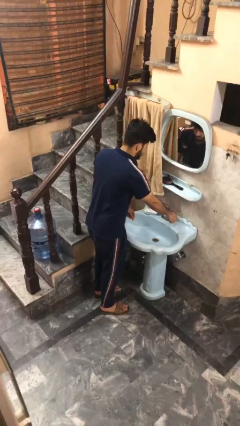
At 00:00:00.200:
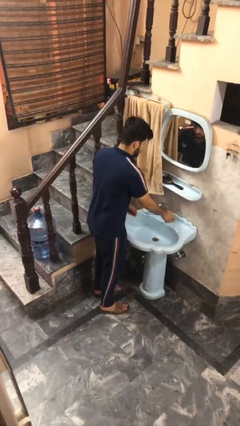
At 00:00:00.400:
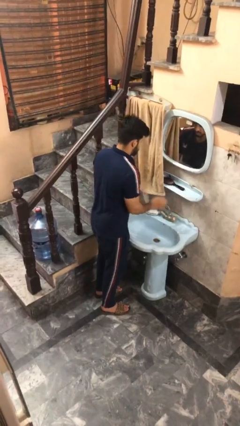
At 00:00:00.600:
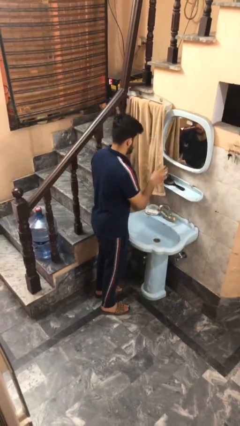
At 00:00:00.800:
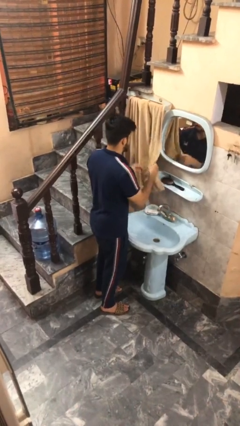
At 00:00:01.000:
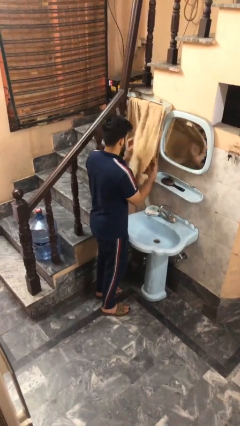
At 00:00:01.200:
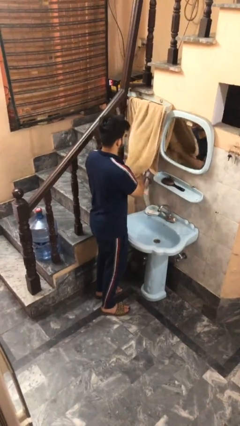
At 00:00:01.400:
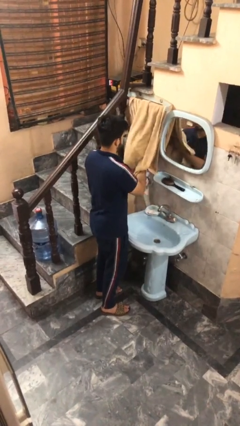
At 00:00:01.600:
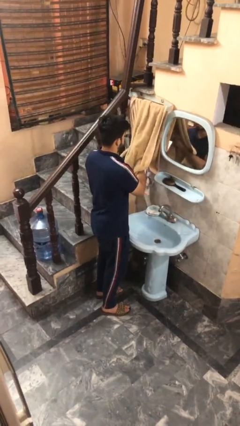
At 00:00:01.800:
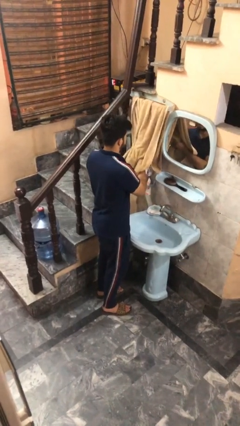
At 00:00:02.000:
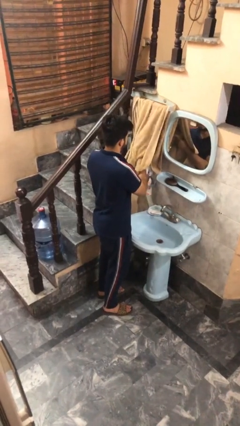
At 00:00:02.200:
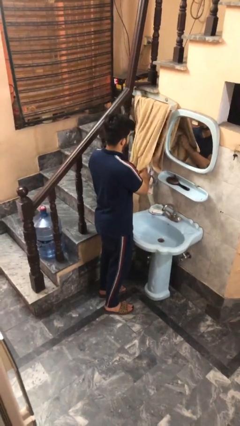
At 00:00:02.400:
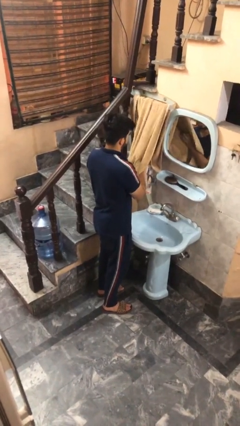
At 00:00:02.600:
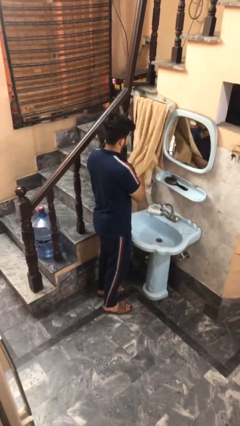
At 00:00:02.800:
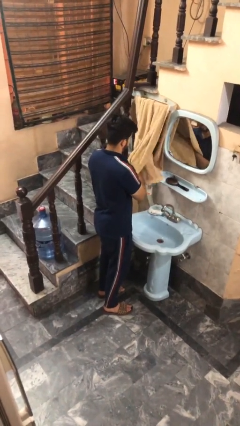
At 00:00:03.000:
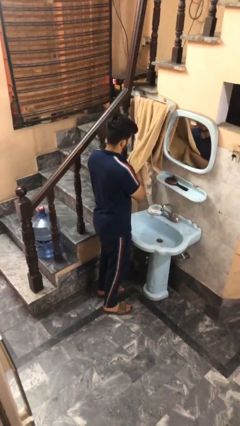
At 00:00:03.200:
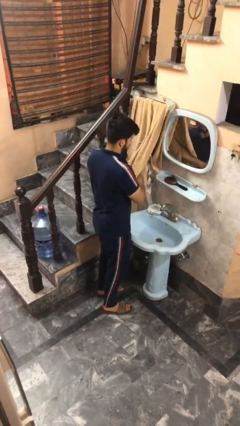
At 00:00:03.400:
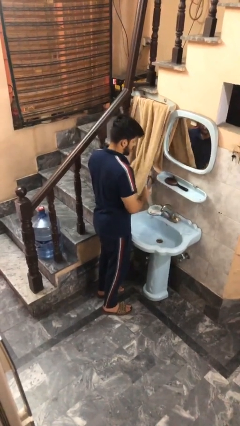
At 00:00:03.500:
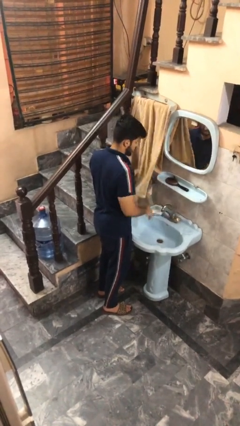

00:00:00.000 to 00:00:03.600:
person dries hands with towel

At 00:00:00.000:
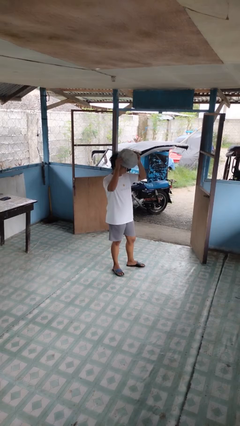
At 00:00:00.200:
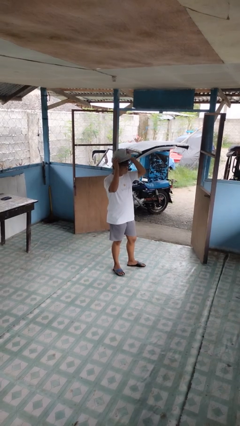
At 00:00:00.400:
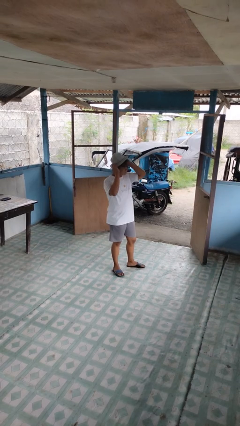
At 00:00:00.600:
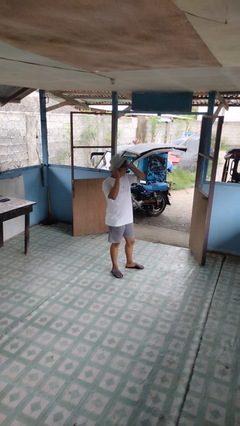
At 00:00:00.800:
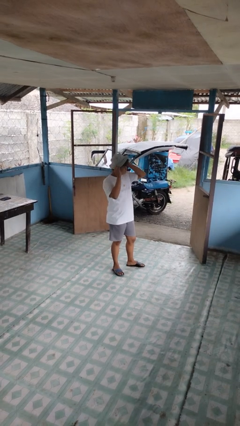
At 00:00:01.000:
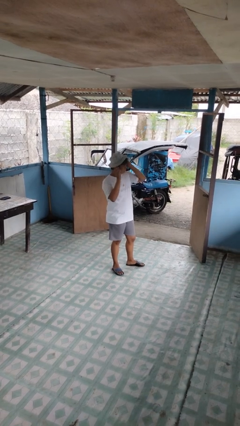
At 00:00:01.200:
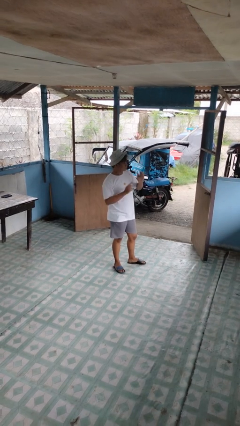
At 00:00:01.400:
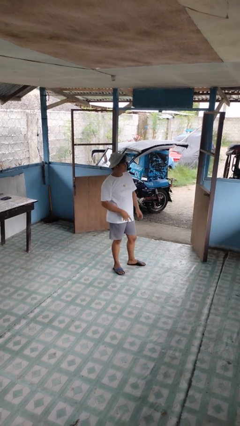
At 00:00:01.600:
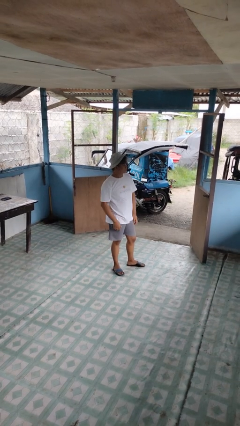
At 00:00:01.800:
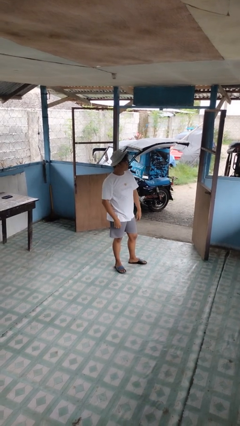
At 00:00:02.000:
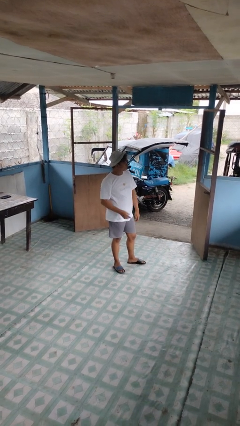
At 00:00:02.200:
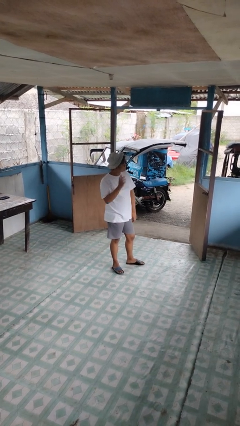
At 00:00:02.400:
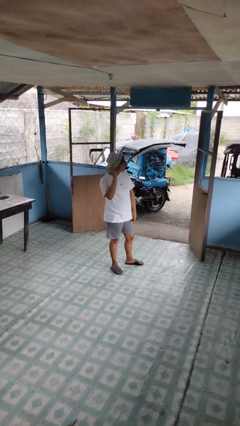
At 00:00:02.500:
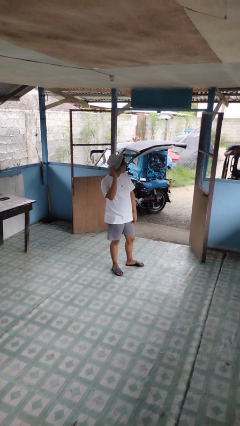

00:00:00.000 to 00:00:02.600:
person puts on hat

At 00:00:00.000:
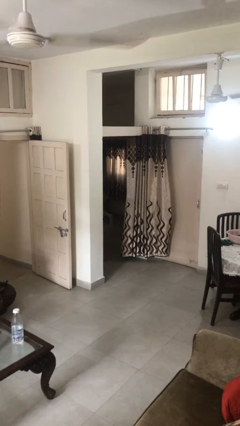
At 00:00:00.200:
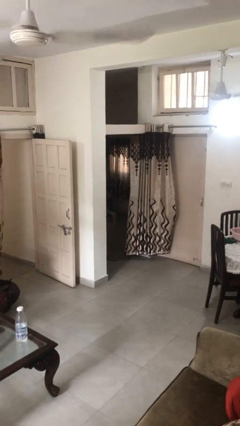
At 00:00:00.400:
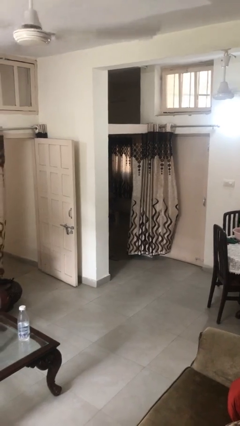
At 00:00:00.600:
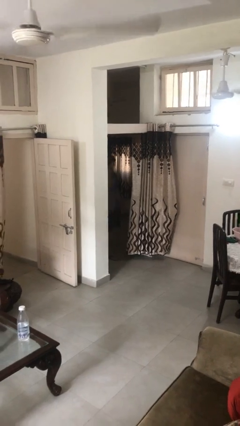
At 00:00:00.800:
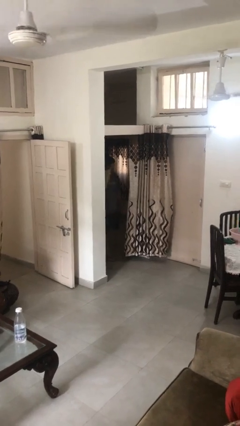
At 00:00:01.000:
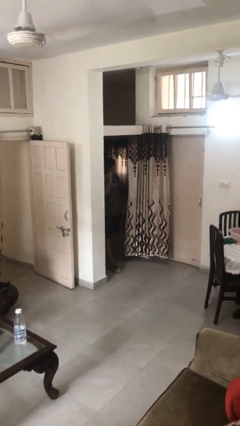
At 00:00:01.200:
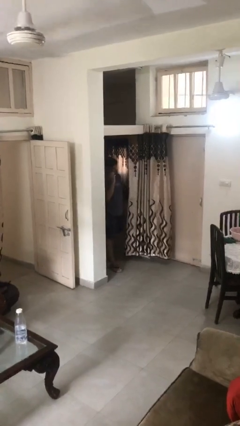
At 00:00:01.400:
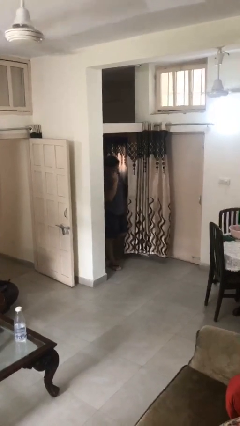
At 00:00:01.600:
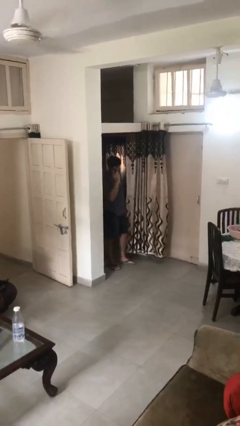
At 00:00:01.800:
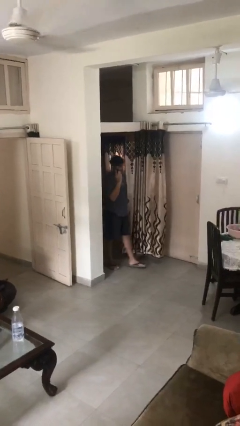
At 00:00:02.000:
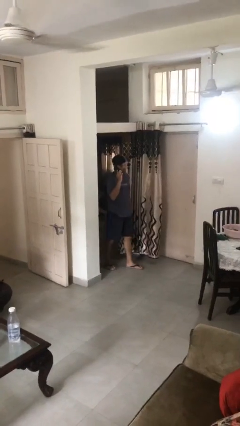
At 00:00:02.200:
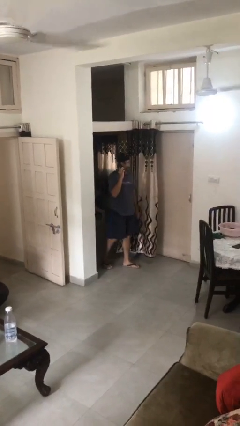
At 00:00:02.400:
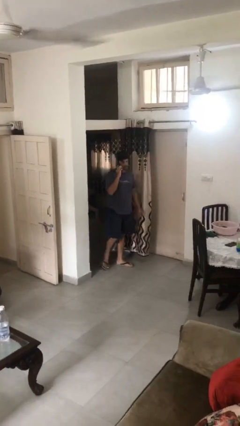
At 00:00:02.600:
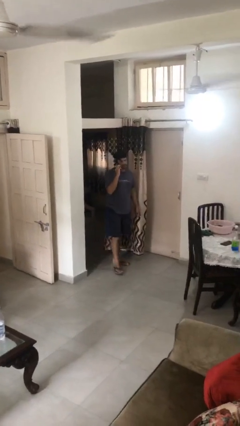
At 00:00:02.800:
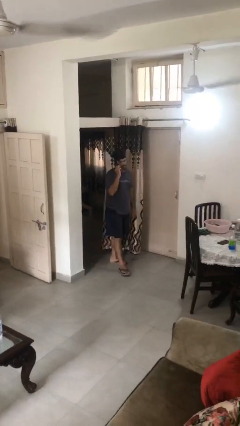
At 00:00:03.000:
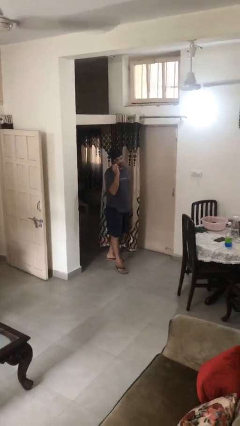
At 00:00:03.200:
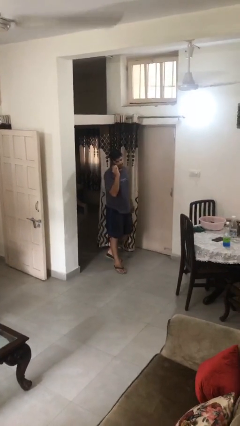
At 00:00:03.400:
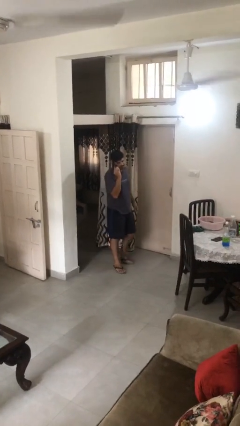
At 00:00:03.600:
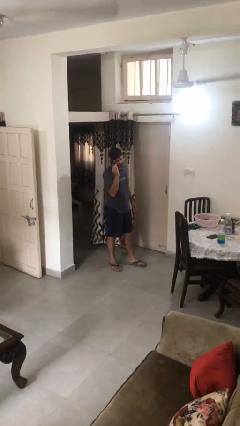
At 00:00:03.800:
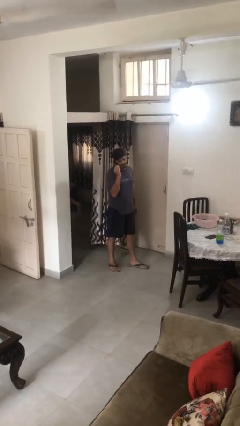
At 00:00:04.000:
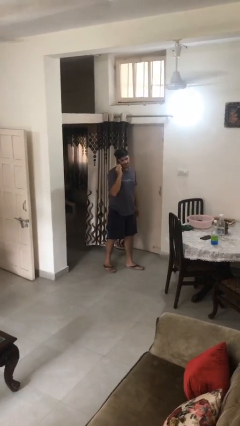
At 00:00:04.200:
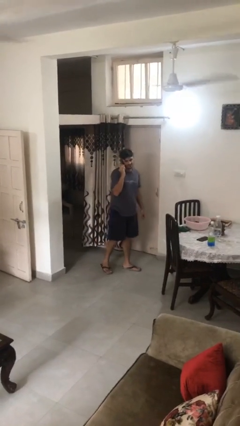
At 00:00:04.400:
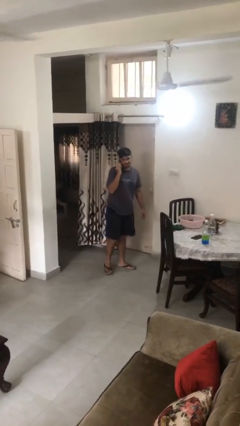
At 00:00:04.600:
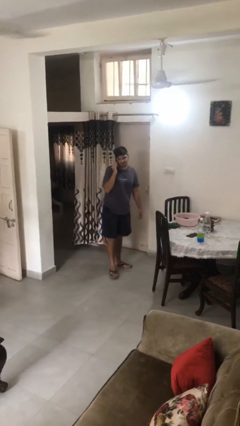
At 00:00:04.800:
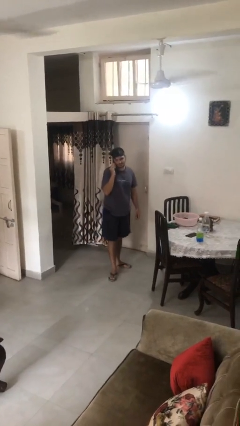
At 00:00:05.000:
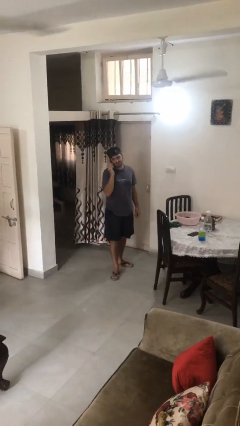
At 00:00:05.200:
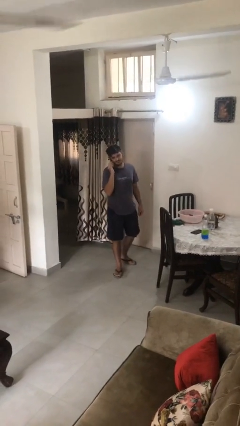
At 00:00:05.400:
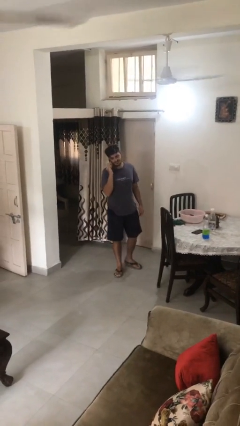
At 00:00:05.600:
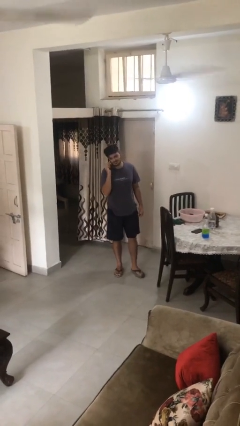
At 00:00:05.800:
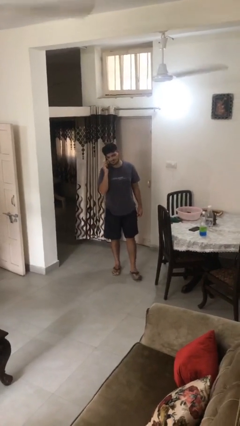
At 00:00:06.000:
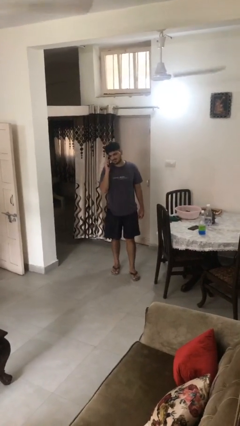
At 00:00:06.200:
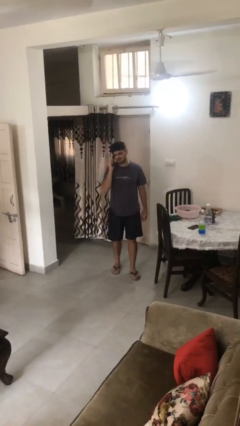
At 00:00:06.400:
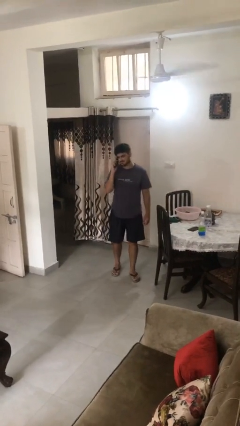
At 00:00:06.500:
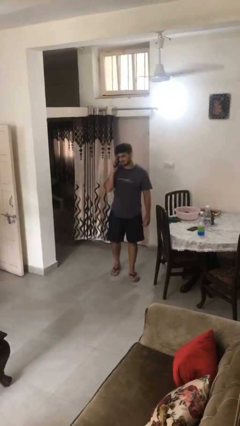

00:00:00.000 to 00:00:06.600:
person enters scene through structure

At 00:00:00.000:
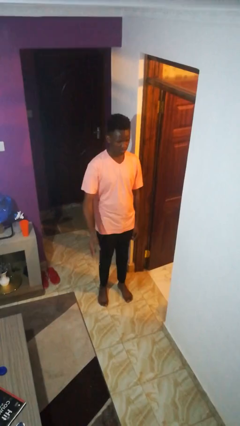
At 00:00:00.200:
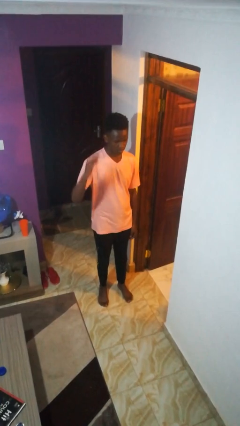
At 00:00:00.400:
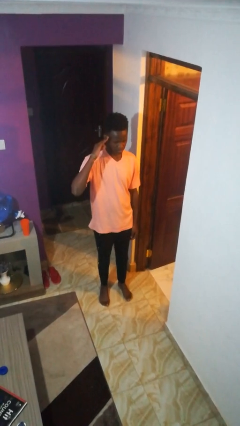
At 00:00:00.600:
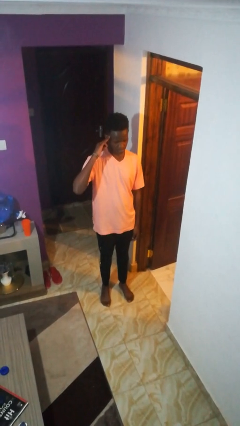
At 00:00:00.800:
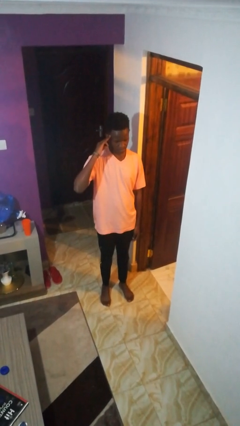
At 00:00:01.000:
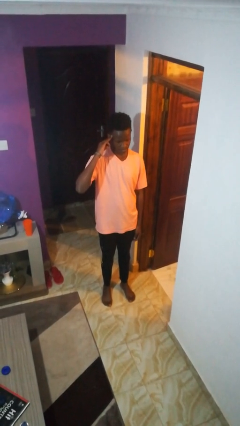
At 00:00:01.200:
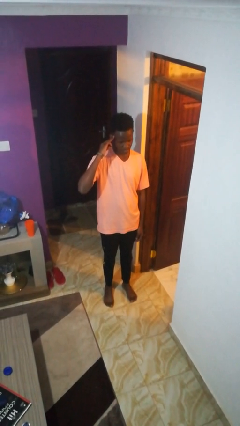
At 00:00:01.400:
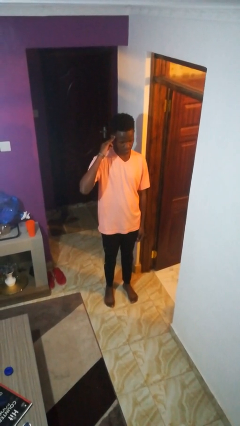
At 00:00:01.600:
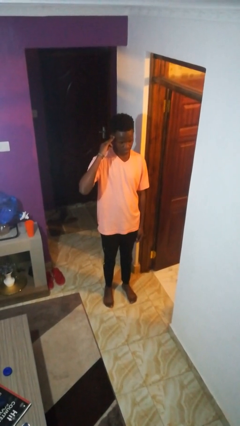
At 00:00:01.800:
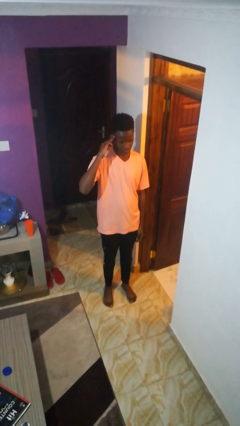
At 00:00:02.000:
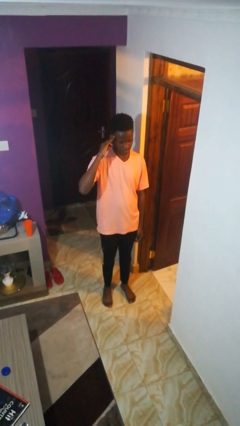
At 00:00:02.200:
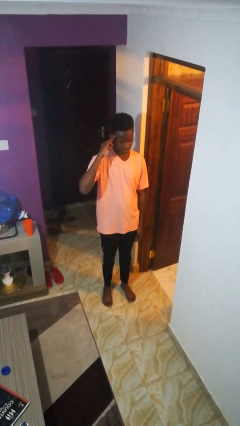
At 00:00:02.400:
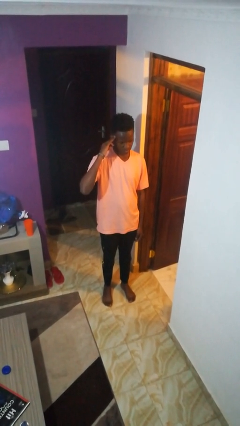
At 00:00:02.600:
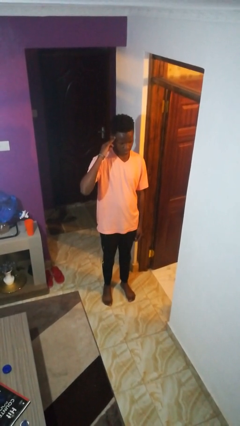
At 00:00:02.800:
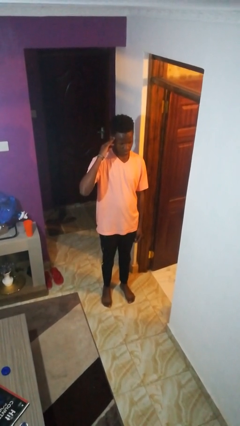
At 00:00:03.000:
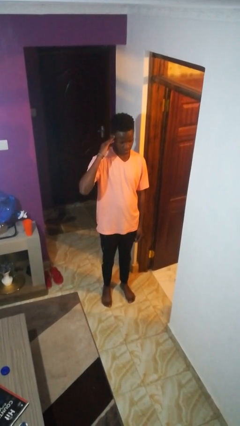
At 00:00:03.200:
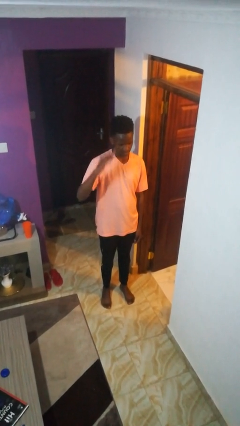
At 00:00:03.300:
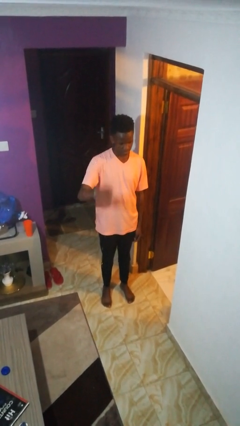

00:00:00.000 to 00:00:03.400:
person salutes

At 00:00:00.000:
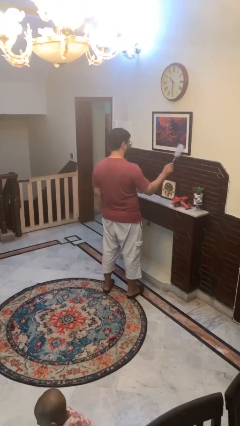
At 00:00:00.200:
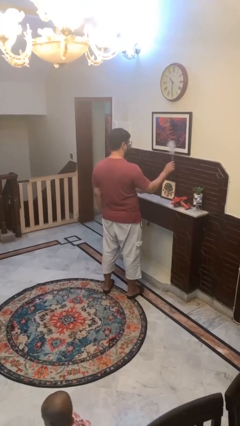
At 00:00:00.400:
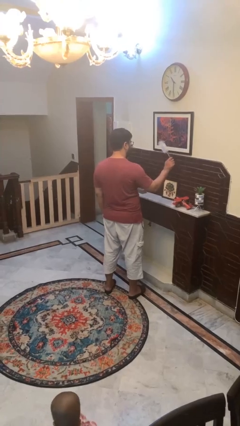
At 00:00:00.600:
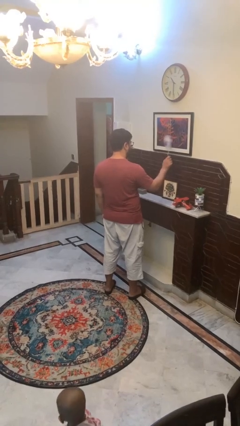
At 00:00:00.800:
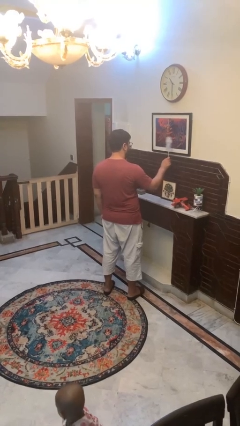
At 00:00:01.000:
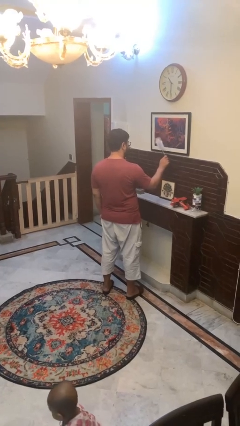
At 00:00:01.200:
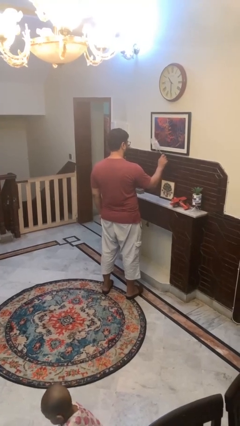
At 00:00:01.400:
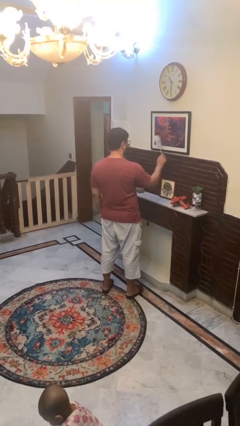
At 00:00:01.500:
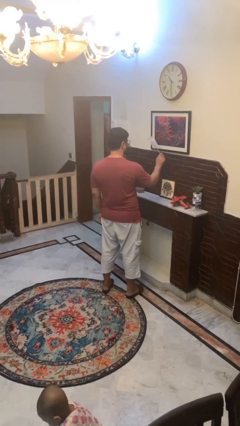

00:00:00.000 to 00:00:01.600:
person dusts furniture
